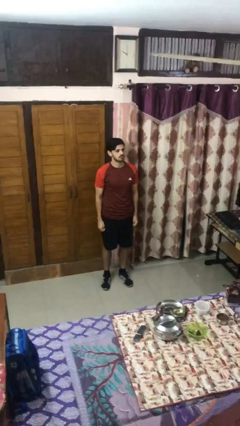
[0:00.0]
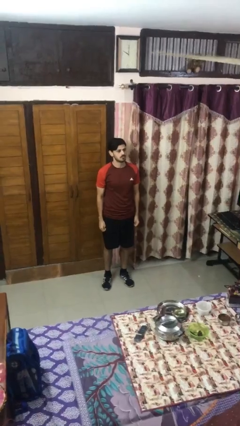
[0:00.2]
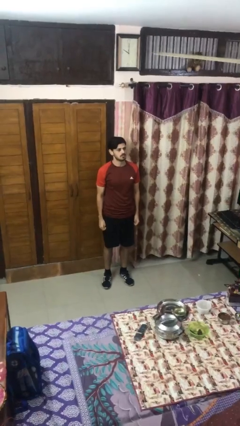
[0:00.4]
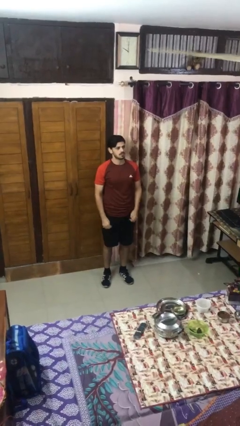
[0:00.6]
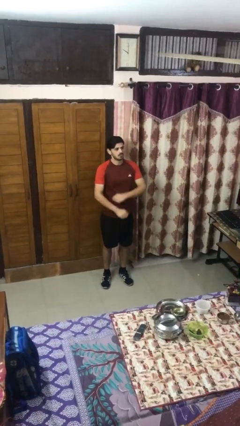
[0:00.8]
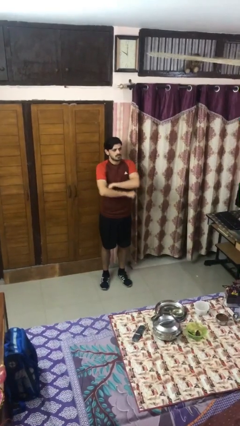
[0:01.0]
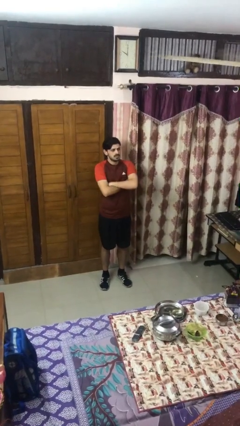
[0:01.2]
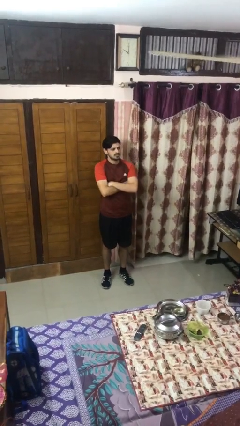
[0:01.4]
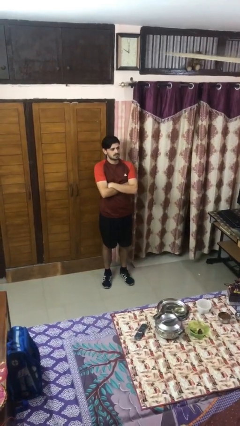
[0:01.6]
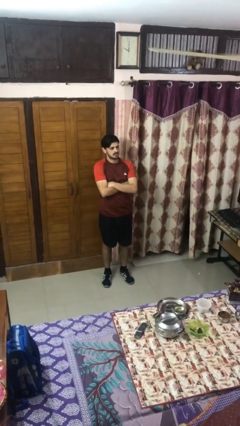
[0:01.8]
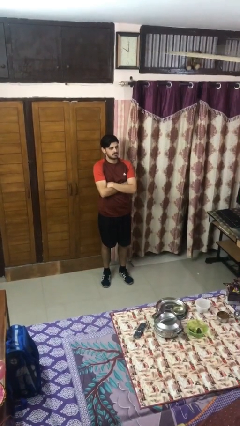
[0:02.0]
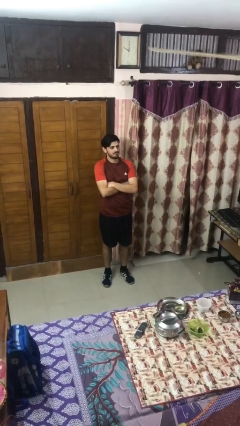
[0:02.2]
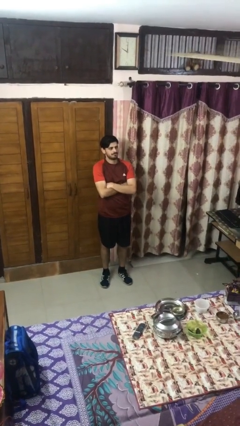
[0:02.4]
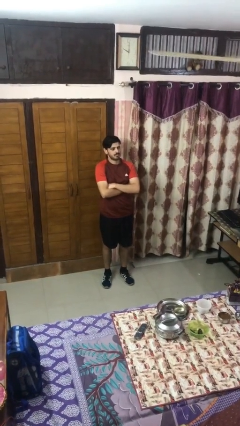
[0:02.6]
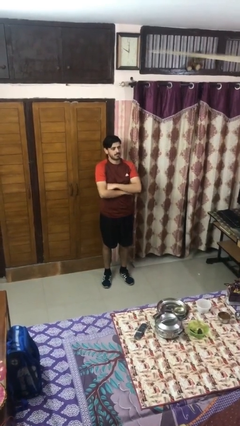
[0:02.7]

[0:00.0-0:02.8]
person crosses arms

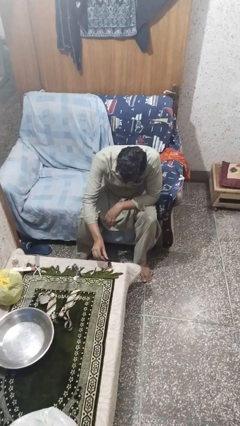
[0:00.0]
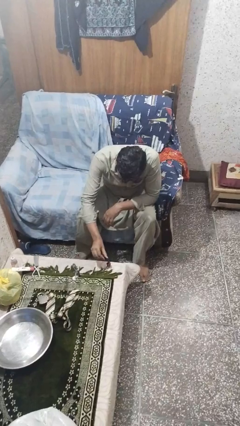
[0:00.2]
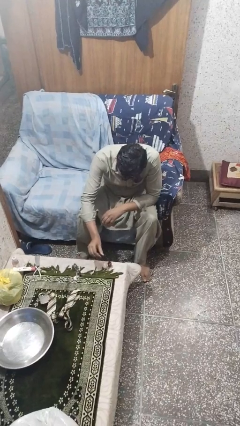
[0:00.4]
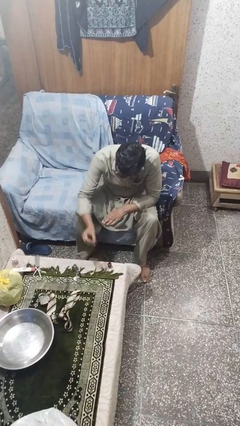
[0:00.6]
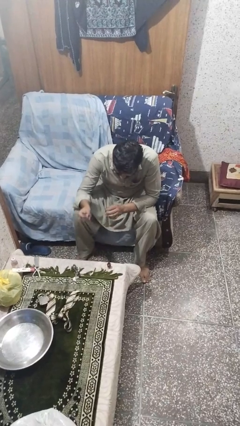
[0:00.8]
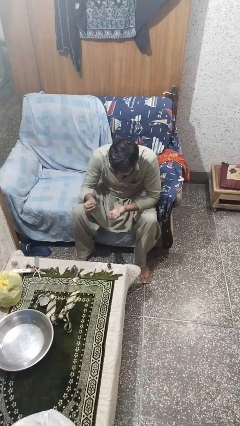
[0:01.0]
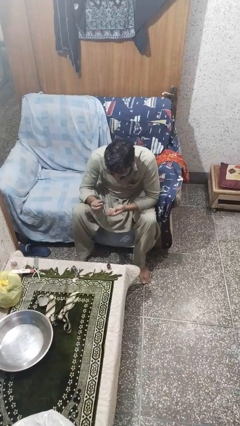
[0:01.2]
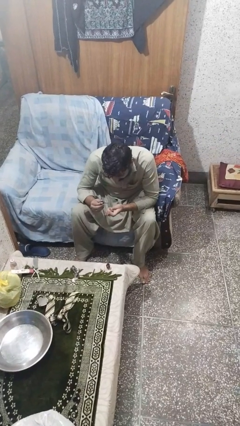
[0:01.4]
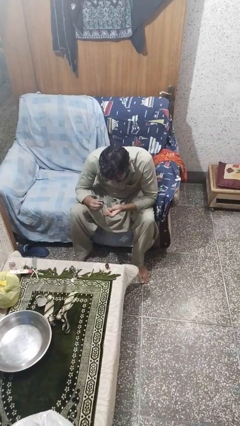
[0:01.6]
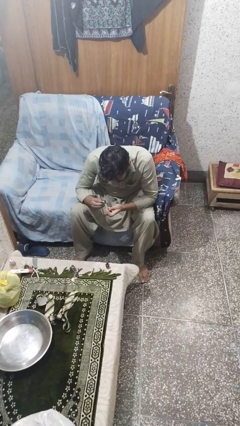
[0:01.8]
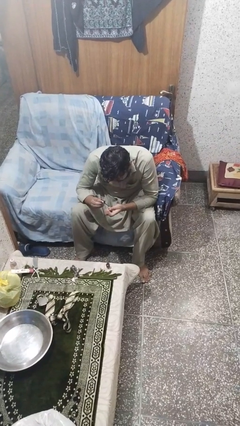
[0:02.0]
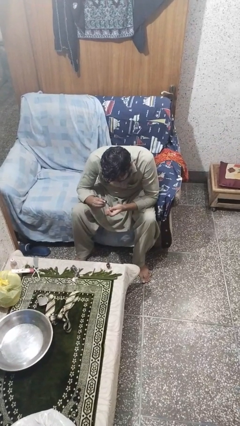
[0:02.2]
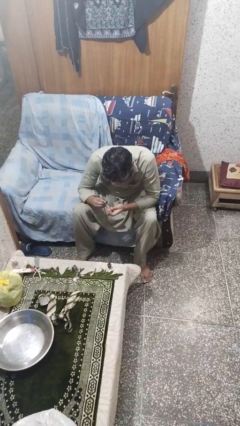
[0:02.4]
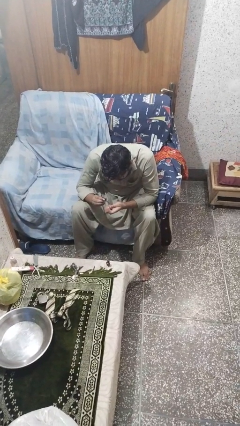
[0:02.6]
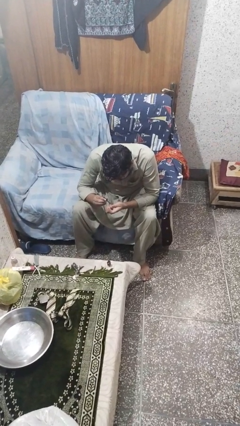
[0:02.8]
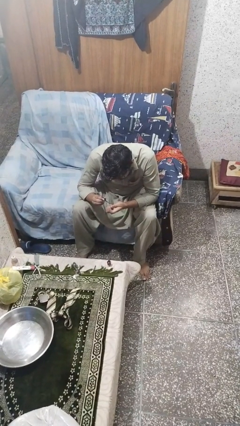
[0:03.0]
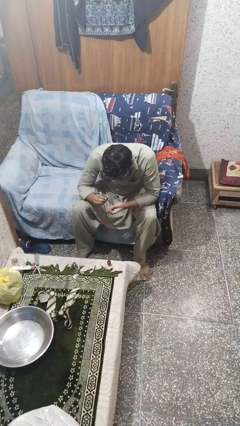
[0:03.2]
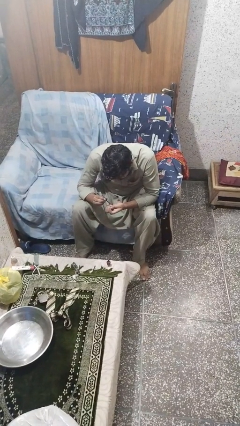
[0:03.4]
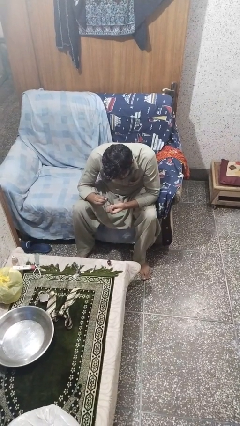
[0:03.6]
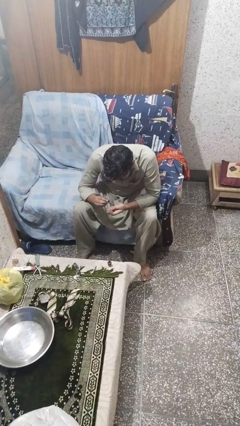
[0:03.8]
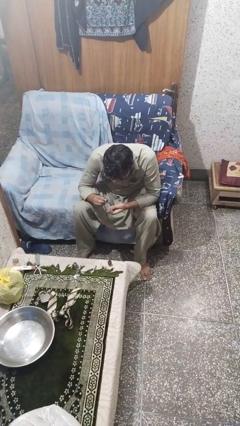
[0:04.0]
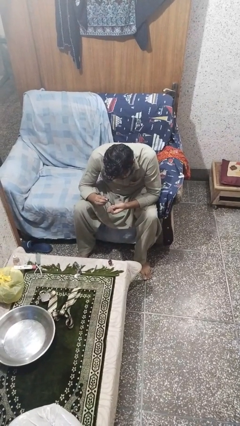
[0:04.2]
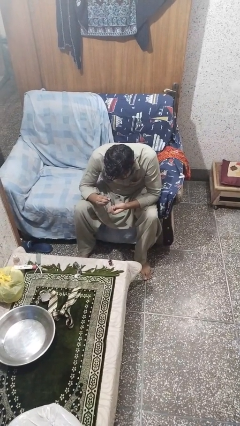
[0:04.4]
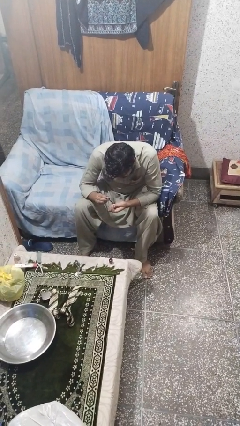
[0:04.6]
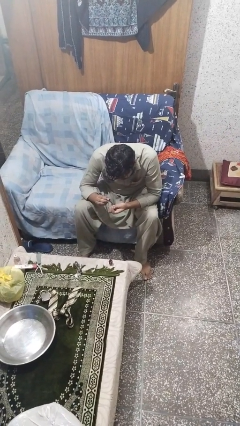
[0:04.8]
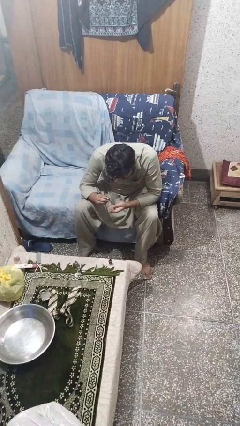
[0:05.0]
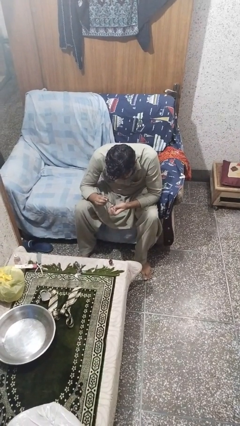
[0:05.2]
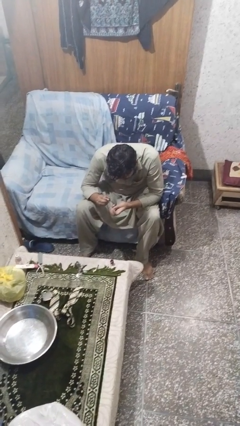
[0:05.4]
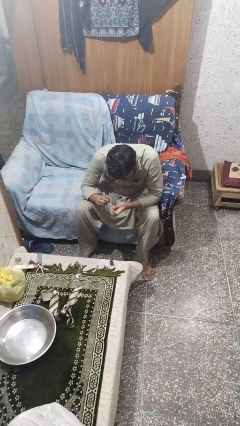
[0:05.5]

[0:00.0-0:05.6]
person paints fingernails

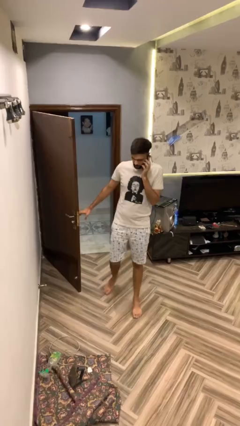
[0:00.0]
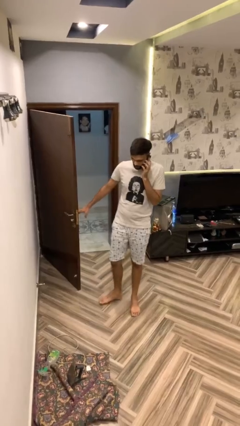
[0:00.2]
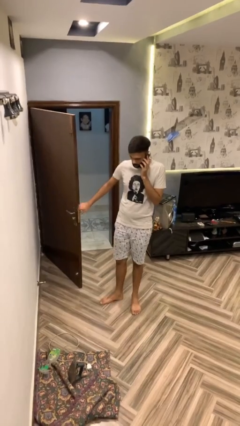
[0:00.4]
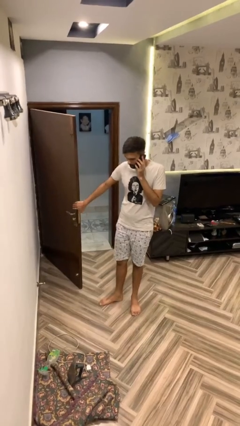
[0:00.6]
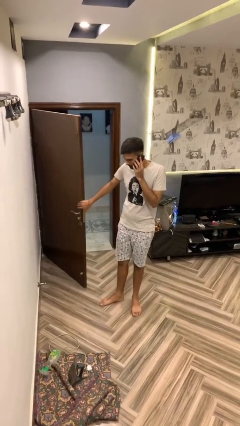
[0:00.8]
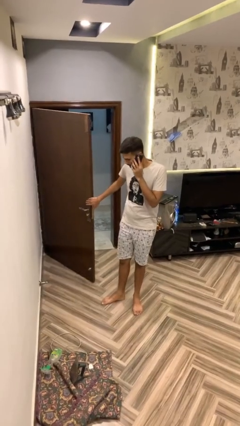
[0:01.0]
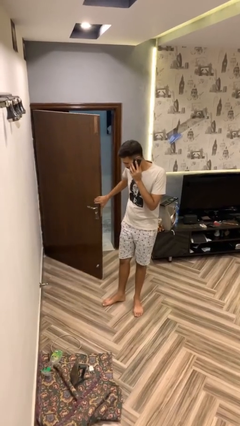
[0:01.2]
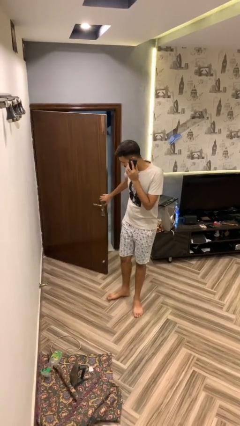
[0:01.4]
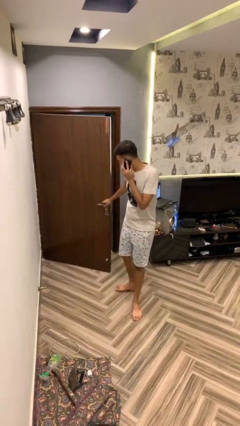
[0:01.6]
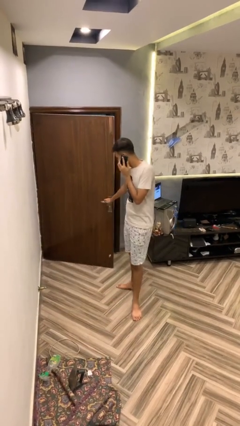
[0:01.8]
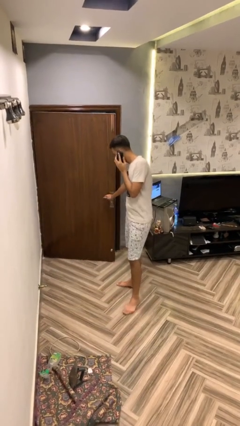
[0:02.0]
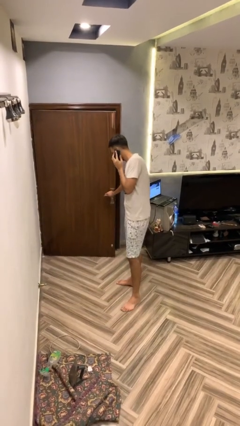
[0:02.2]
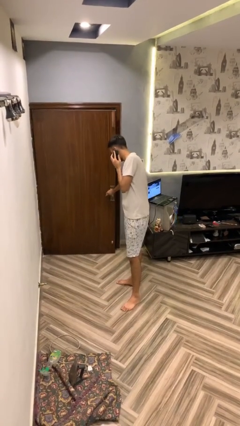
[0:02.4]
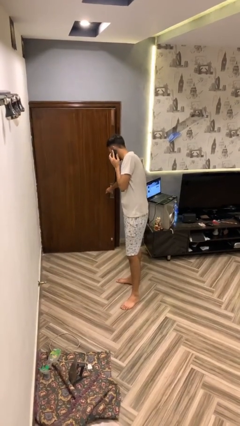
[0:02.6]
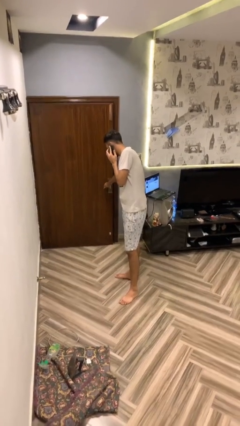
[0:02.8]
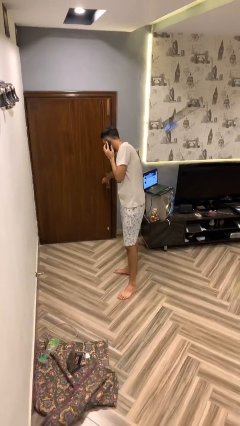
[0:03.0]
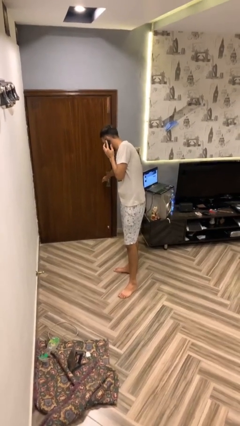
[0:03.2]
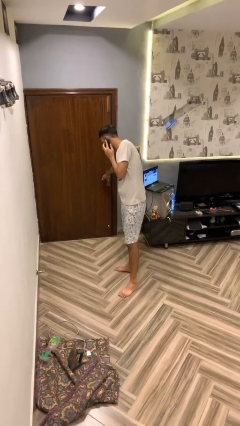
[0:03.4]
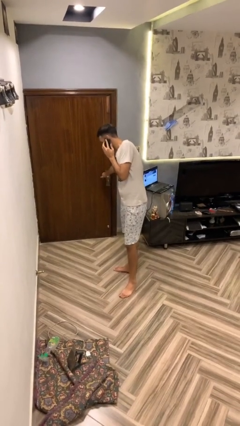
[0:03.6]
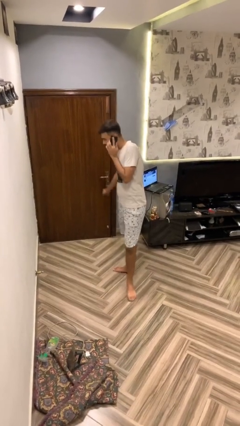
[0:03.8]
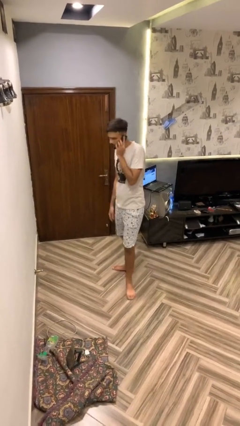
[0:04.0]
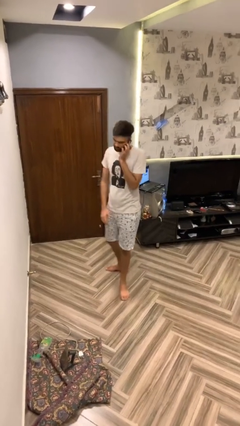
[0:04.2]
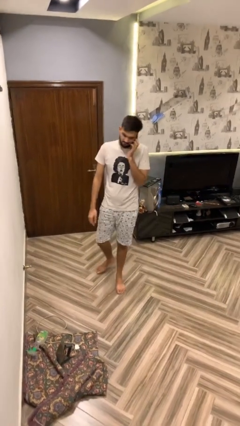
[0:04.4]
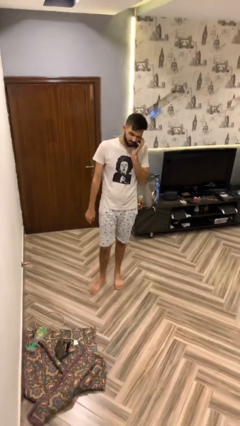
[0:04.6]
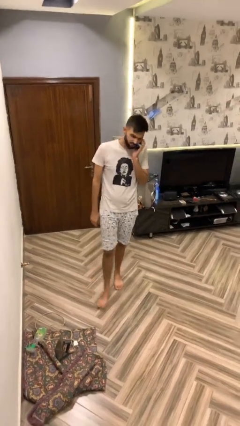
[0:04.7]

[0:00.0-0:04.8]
person closes facility door

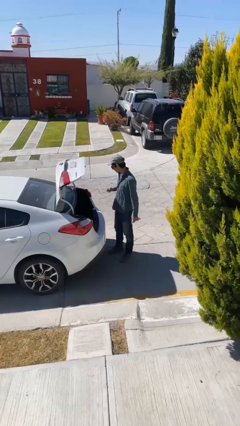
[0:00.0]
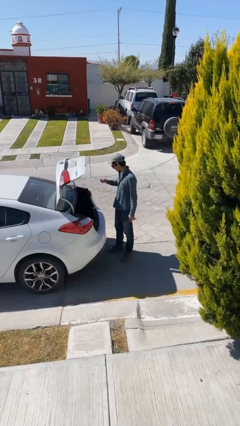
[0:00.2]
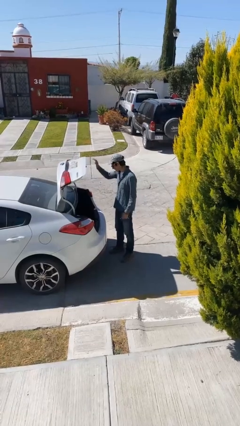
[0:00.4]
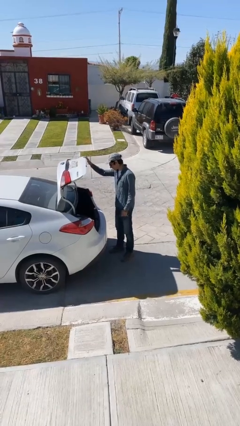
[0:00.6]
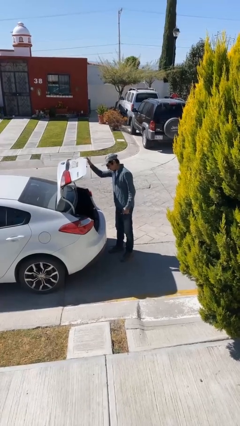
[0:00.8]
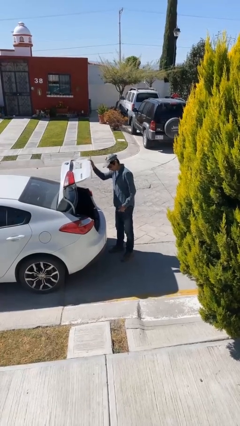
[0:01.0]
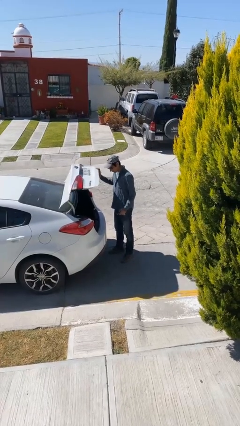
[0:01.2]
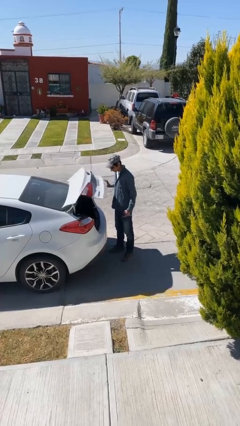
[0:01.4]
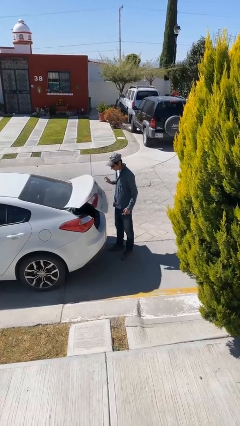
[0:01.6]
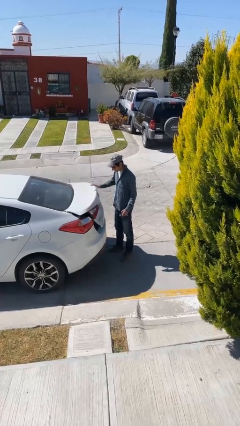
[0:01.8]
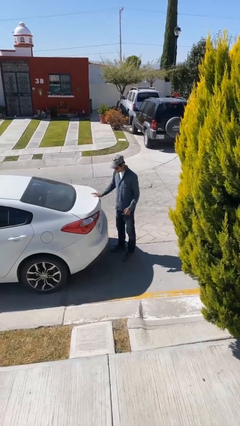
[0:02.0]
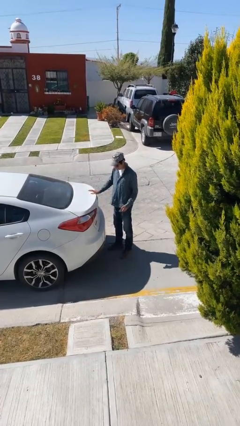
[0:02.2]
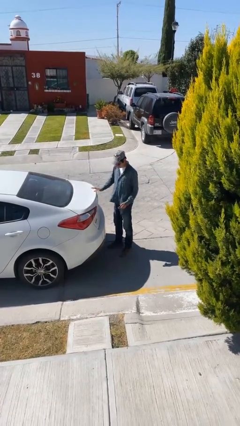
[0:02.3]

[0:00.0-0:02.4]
person closes car trunk

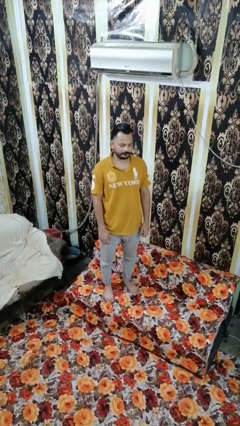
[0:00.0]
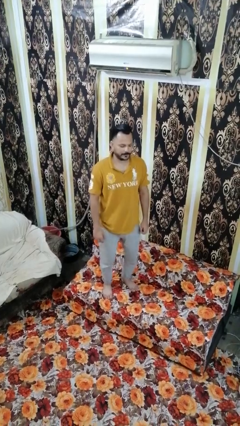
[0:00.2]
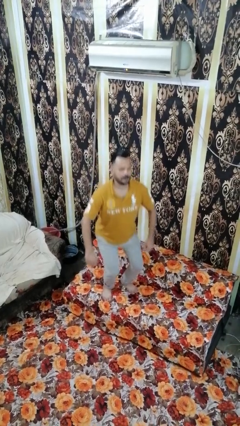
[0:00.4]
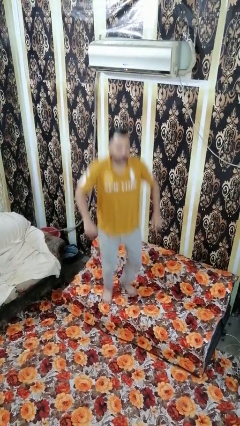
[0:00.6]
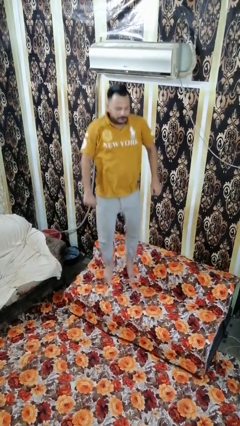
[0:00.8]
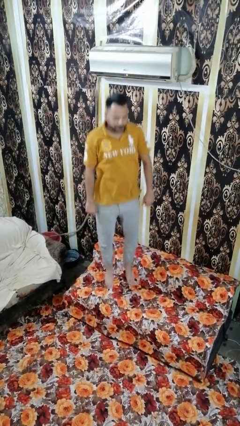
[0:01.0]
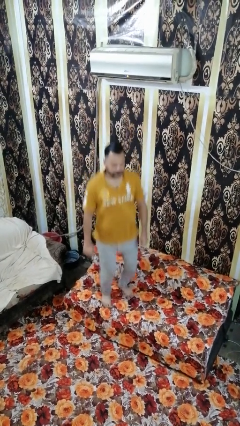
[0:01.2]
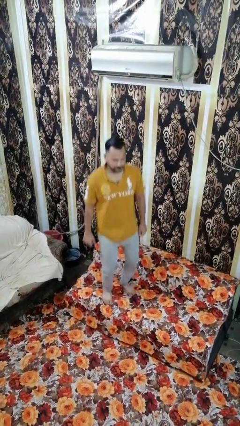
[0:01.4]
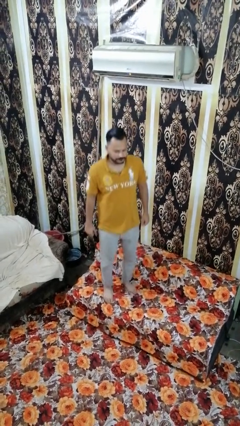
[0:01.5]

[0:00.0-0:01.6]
person jumps on couch

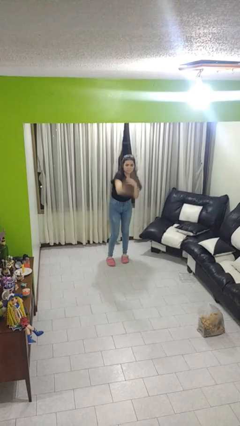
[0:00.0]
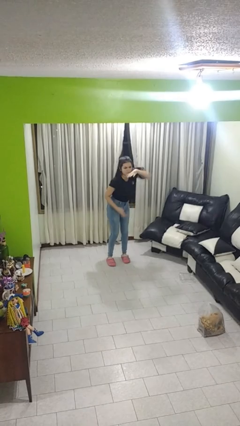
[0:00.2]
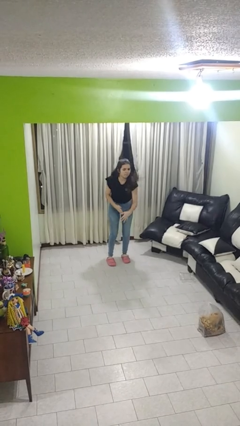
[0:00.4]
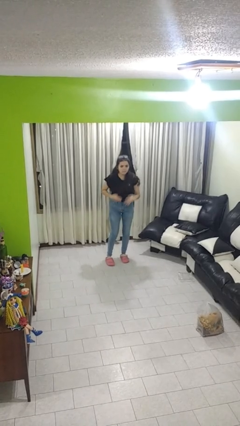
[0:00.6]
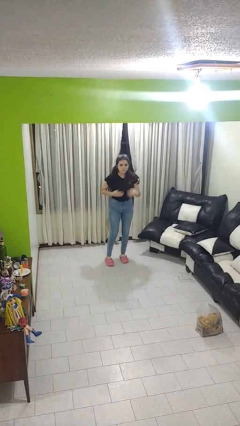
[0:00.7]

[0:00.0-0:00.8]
person karate chop
